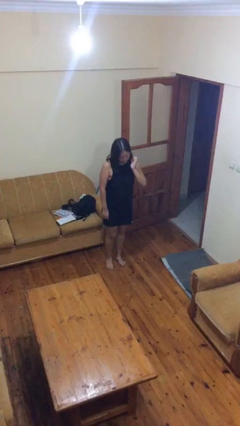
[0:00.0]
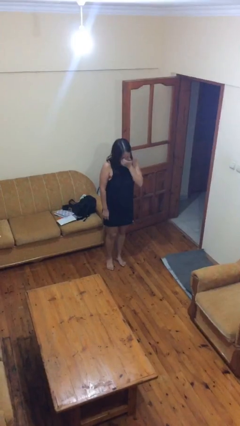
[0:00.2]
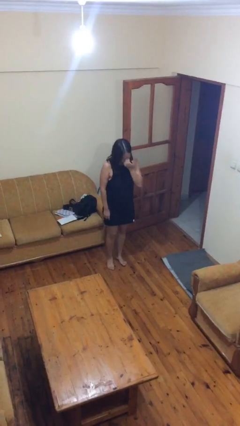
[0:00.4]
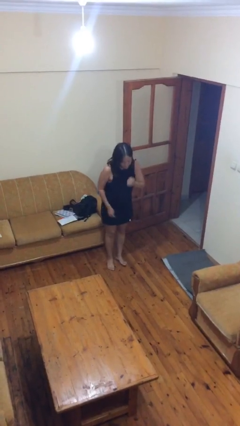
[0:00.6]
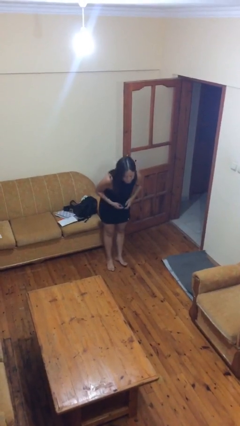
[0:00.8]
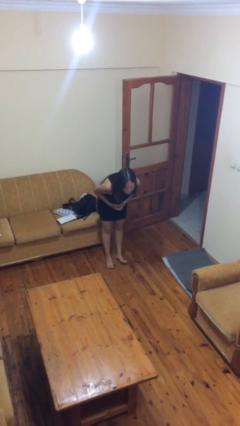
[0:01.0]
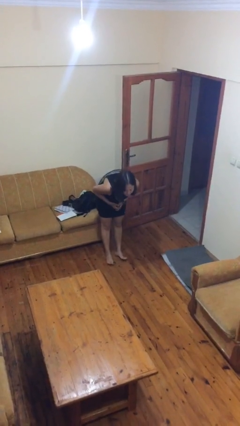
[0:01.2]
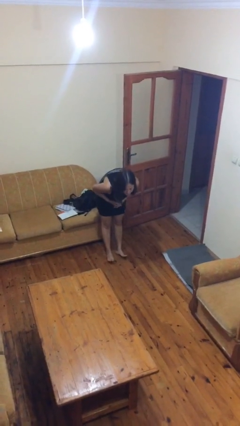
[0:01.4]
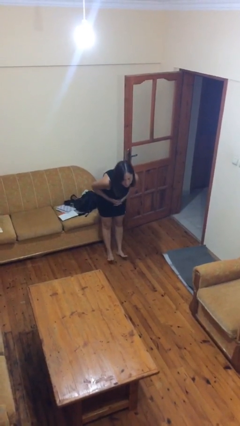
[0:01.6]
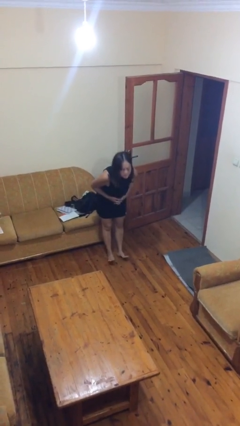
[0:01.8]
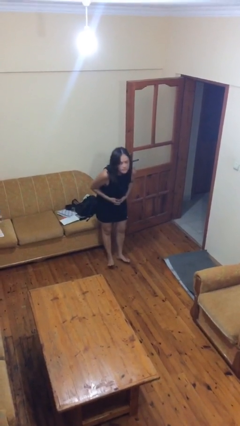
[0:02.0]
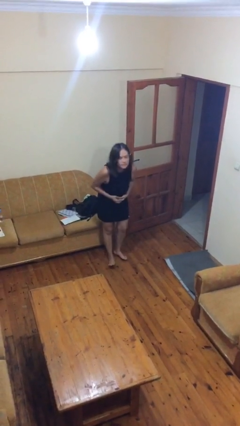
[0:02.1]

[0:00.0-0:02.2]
person bows

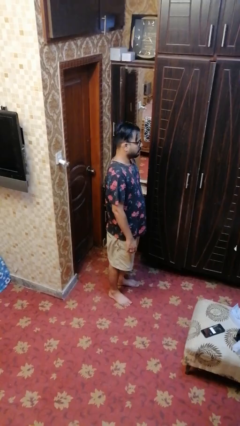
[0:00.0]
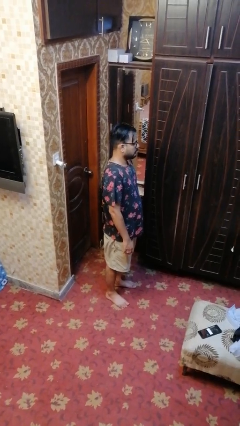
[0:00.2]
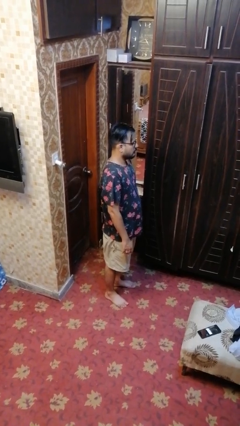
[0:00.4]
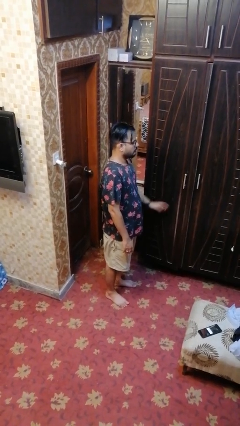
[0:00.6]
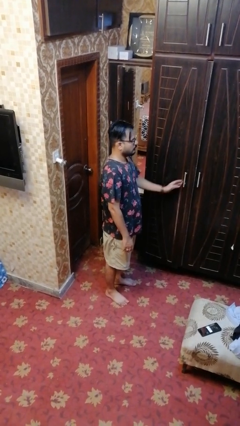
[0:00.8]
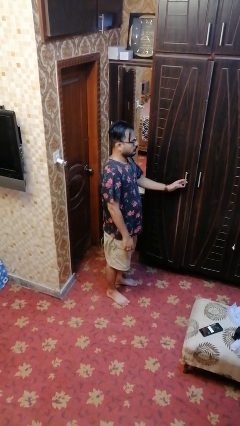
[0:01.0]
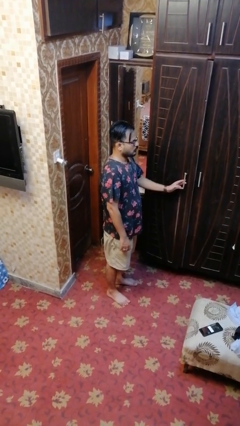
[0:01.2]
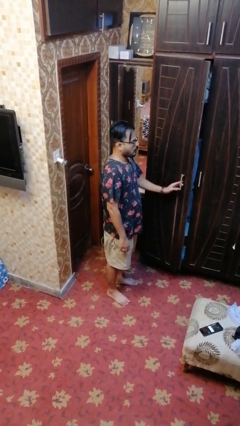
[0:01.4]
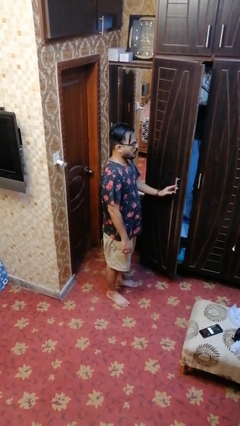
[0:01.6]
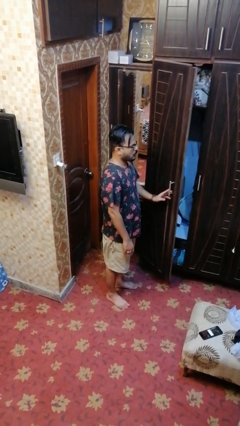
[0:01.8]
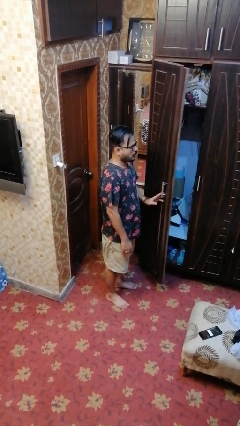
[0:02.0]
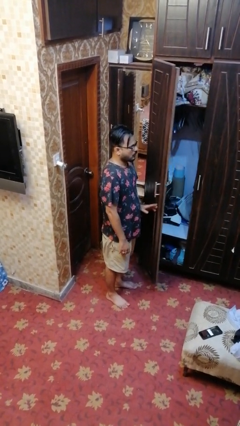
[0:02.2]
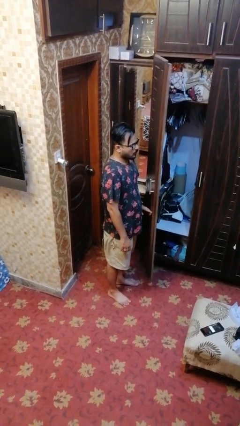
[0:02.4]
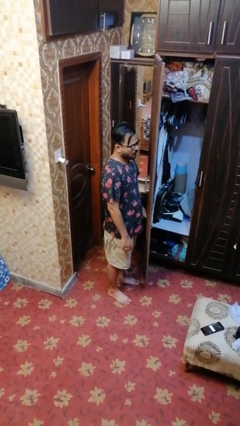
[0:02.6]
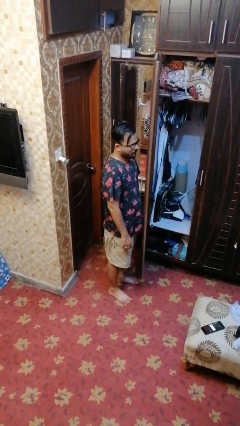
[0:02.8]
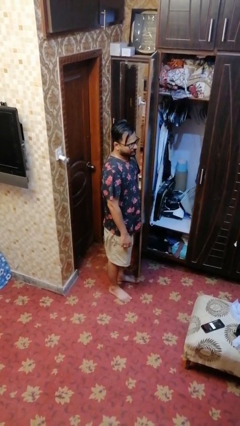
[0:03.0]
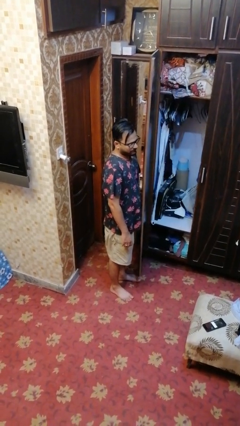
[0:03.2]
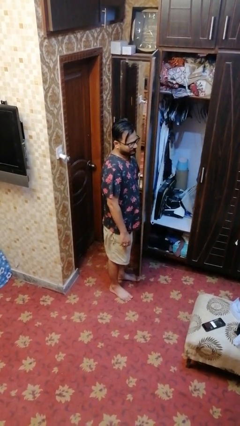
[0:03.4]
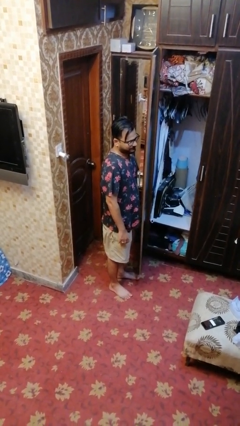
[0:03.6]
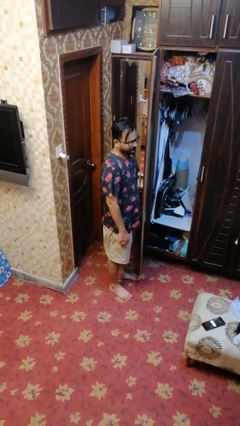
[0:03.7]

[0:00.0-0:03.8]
person opens closet door

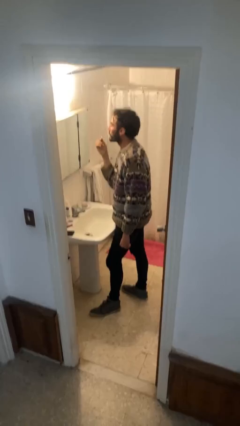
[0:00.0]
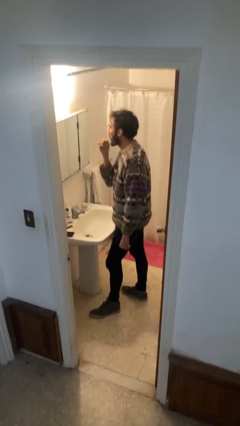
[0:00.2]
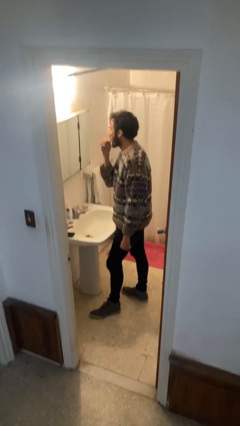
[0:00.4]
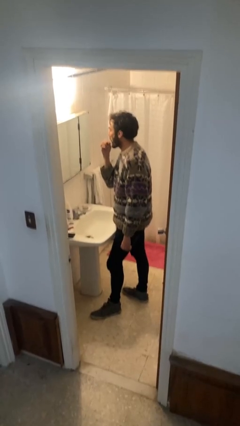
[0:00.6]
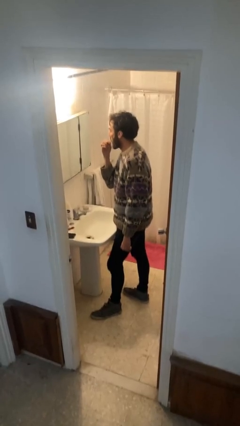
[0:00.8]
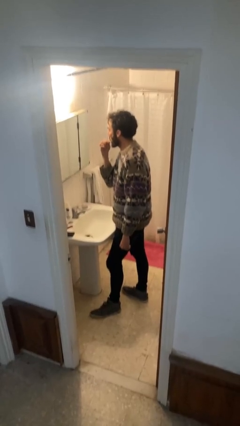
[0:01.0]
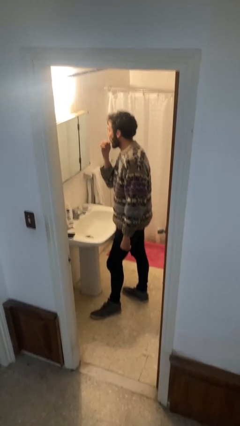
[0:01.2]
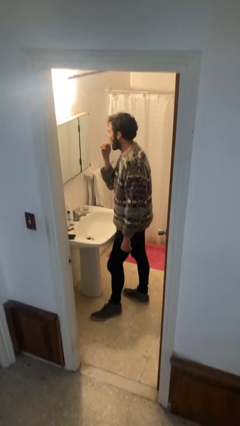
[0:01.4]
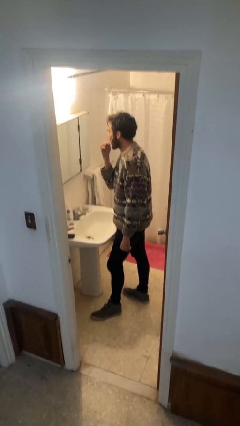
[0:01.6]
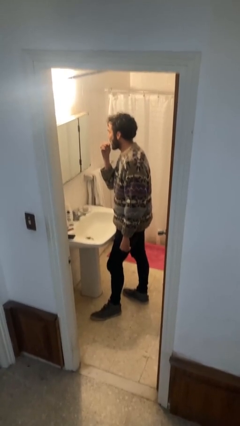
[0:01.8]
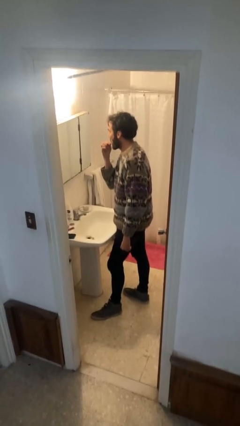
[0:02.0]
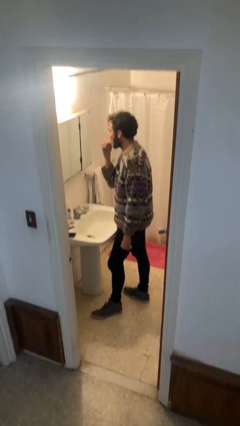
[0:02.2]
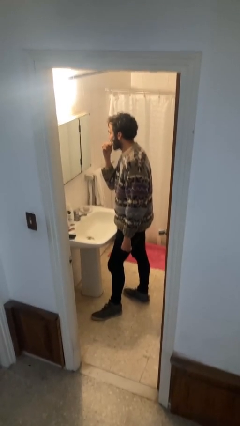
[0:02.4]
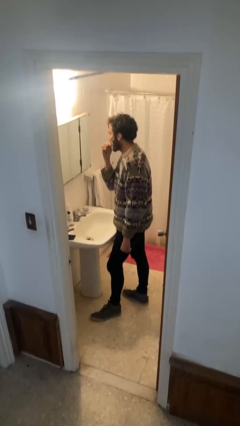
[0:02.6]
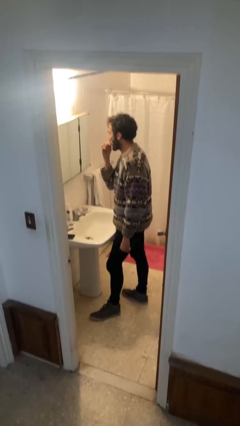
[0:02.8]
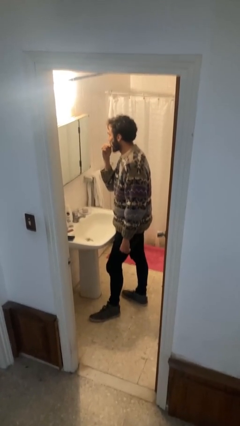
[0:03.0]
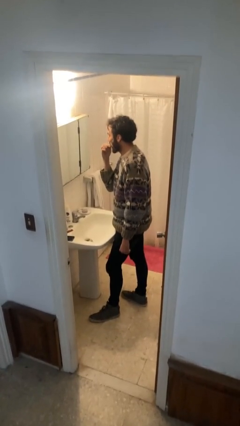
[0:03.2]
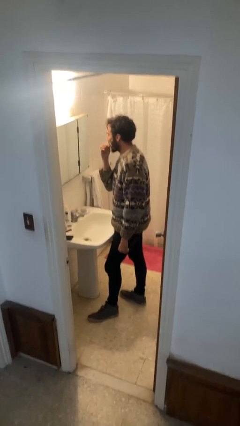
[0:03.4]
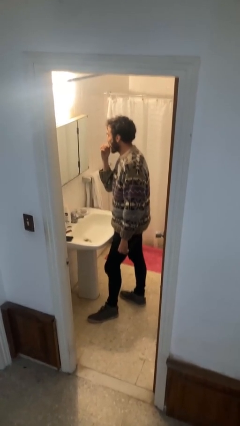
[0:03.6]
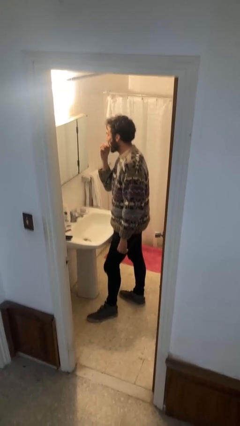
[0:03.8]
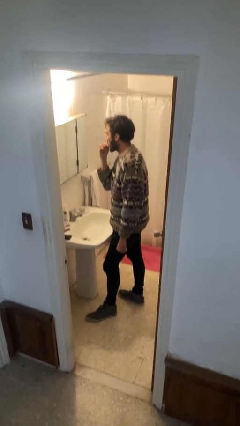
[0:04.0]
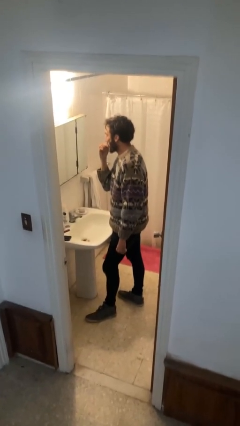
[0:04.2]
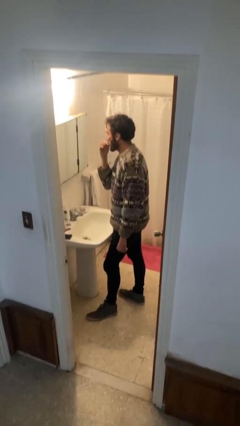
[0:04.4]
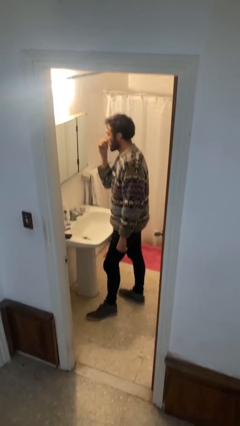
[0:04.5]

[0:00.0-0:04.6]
person applies lip makeup

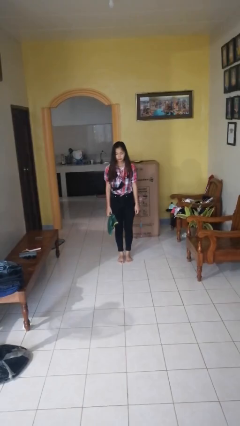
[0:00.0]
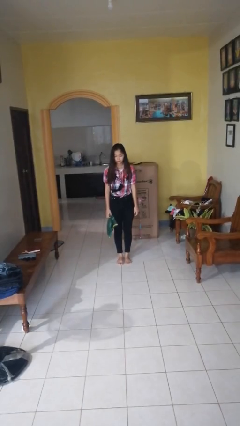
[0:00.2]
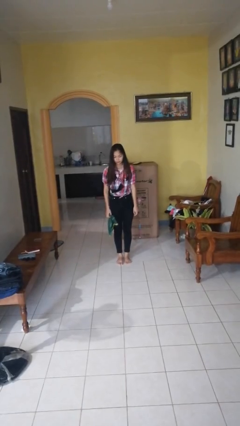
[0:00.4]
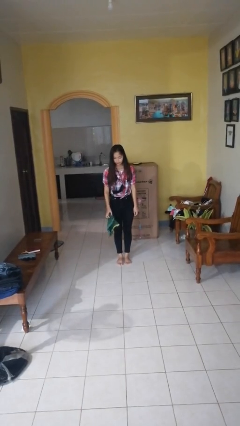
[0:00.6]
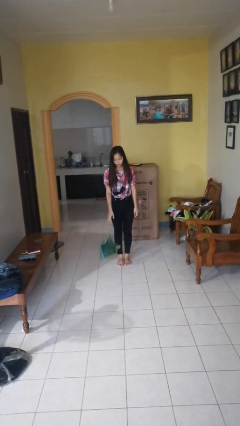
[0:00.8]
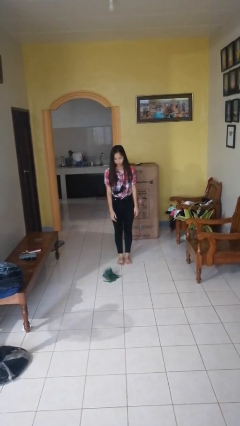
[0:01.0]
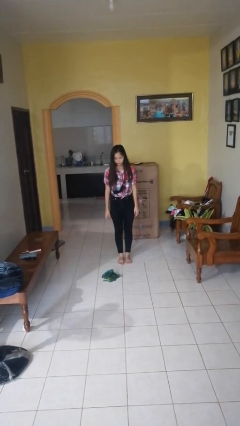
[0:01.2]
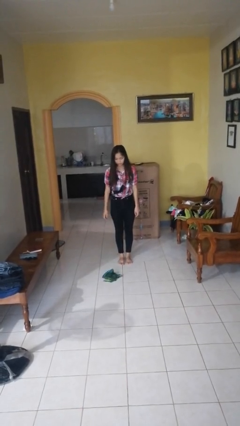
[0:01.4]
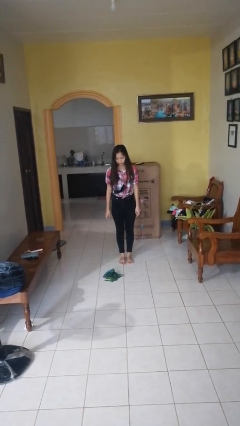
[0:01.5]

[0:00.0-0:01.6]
person throws object into air

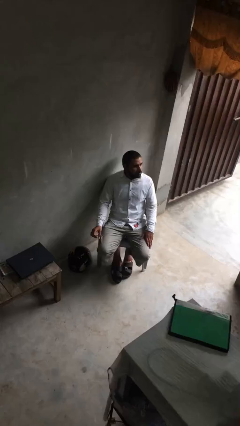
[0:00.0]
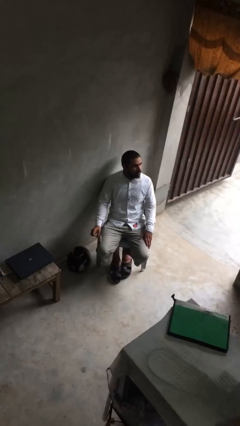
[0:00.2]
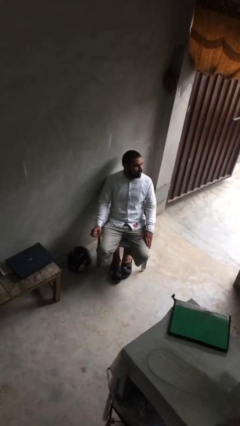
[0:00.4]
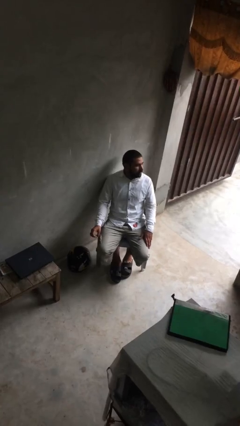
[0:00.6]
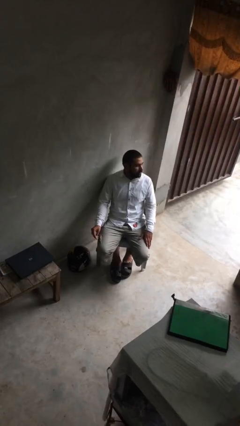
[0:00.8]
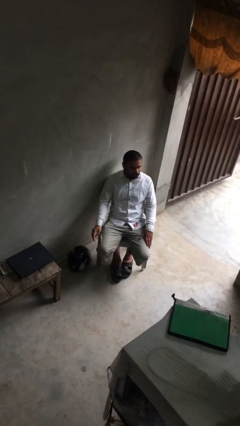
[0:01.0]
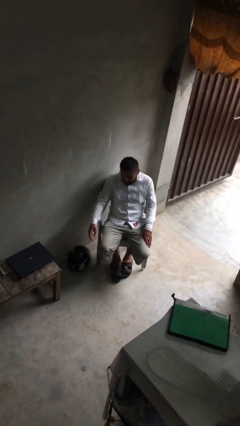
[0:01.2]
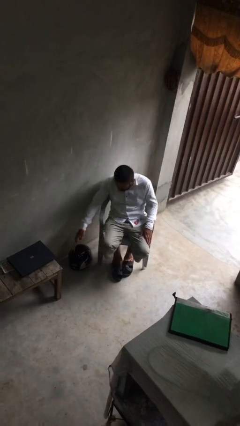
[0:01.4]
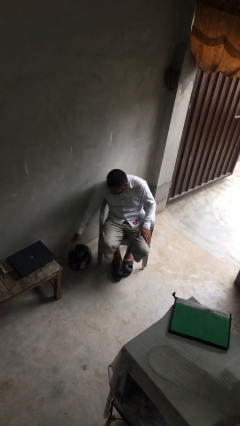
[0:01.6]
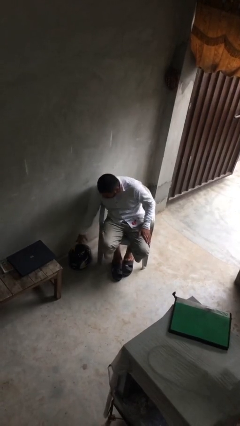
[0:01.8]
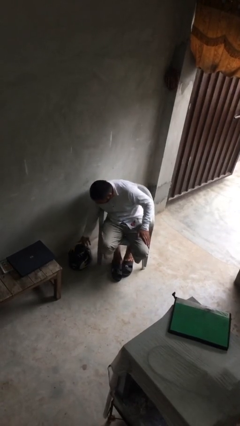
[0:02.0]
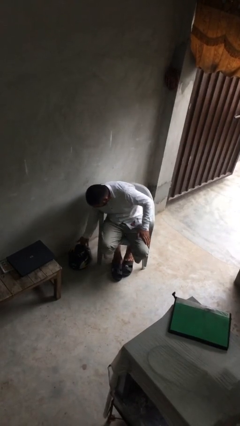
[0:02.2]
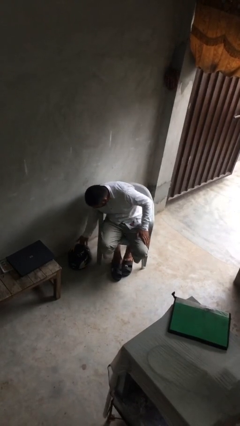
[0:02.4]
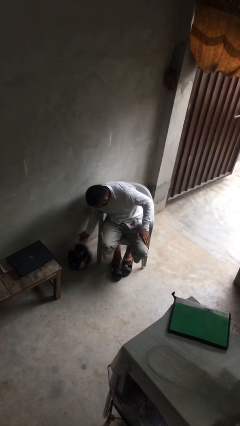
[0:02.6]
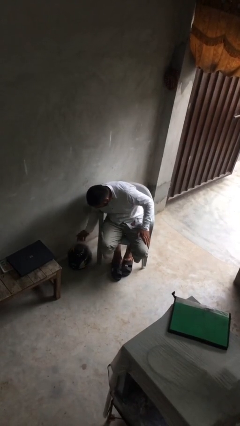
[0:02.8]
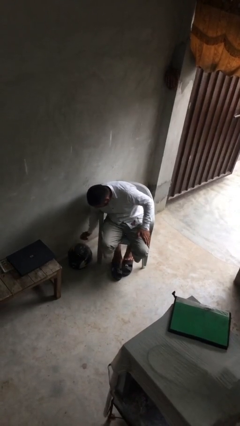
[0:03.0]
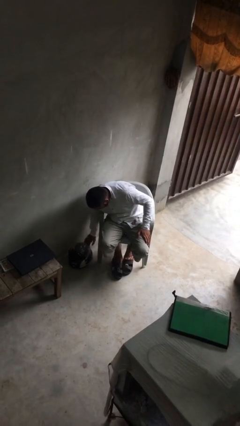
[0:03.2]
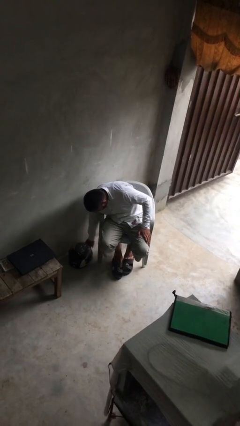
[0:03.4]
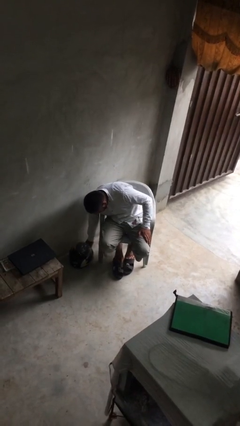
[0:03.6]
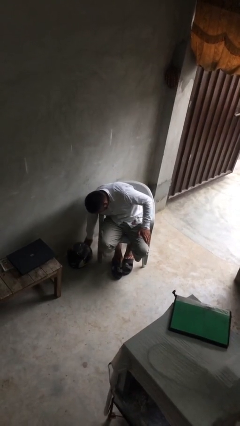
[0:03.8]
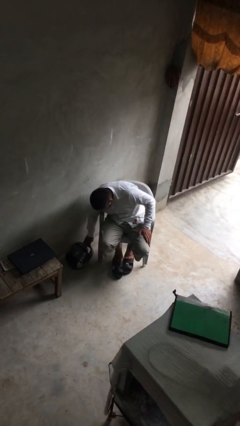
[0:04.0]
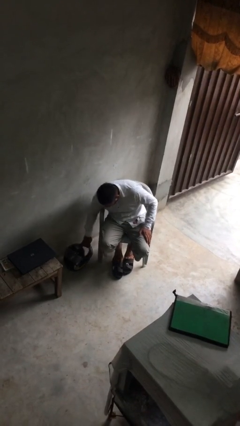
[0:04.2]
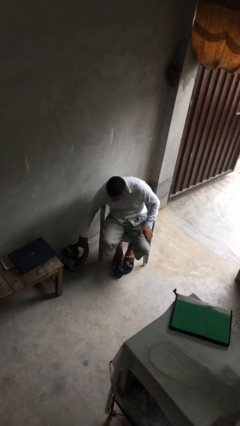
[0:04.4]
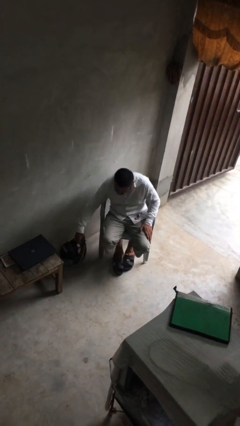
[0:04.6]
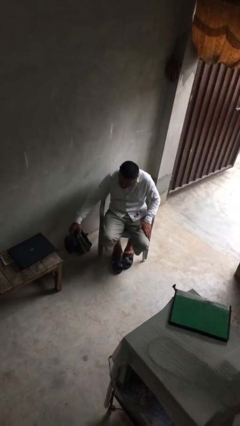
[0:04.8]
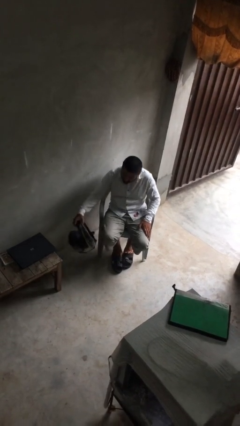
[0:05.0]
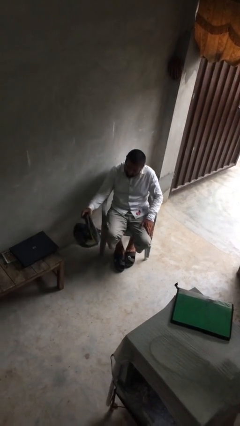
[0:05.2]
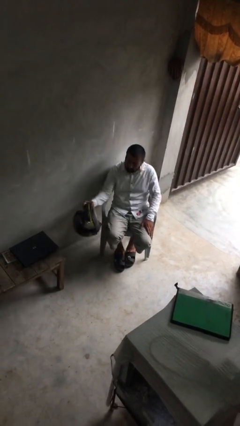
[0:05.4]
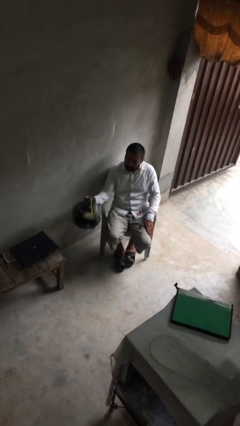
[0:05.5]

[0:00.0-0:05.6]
person picks up object from floor
